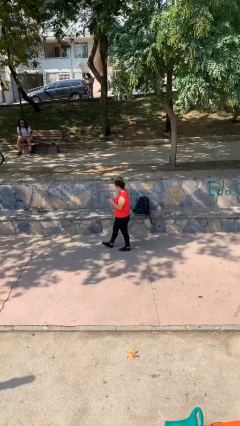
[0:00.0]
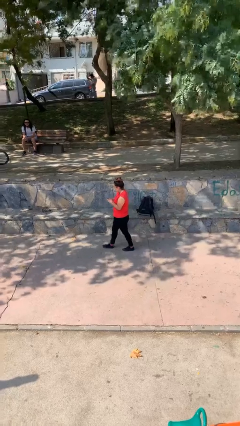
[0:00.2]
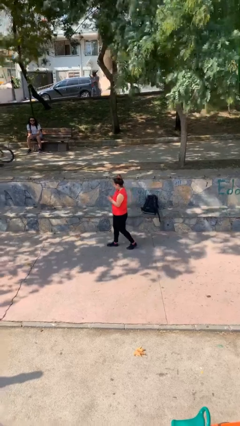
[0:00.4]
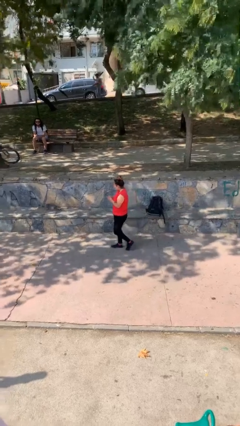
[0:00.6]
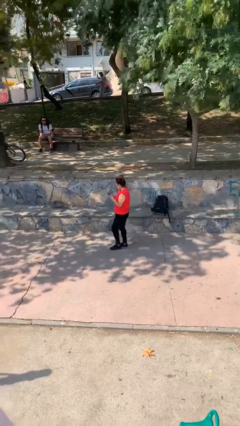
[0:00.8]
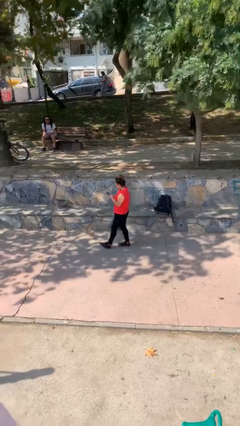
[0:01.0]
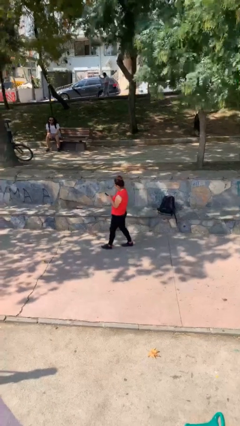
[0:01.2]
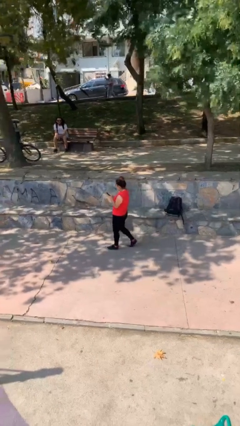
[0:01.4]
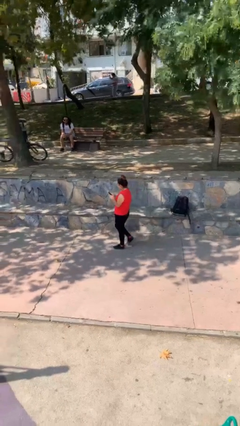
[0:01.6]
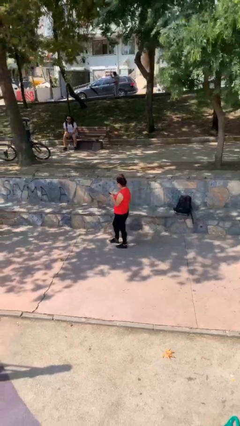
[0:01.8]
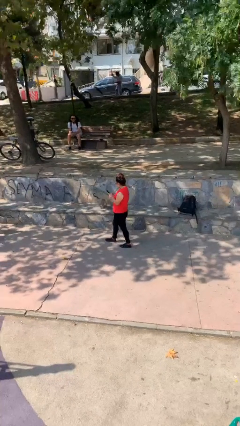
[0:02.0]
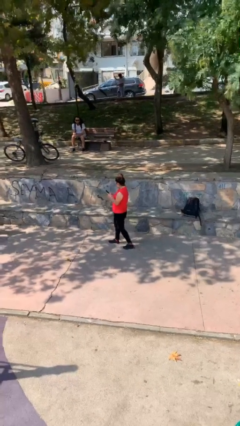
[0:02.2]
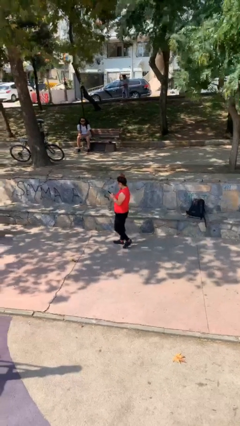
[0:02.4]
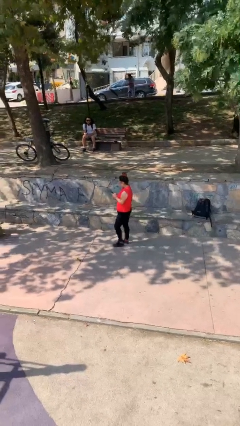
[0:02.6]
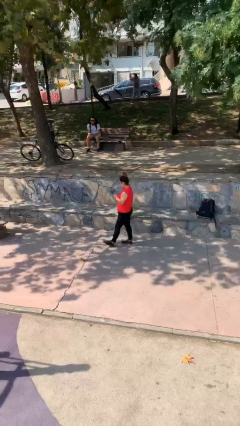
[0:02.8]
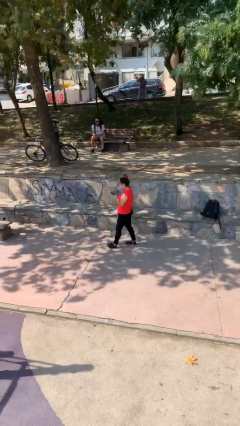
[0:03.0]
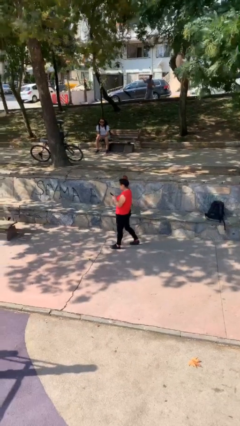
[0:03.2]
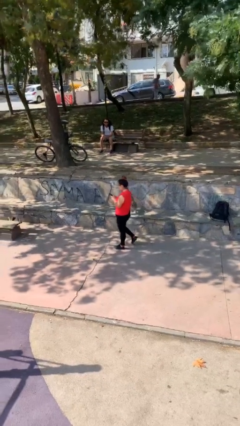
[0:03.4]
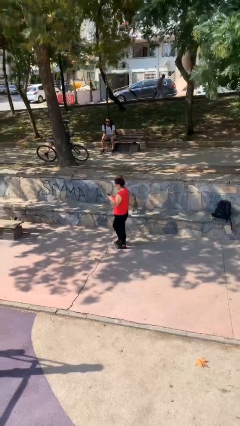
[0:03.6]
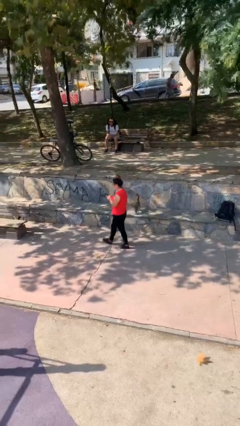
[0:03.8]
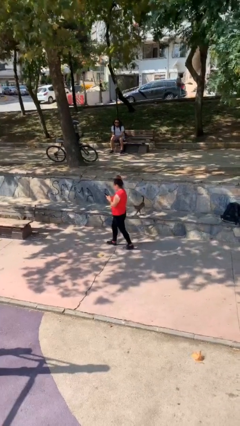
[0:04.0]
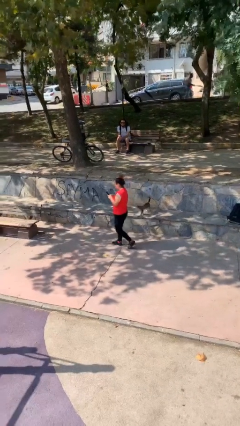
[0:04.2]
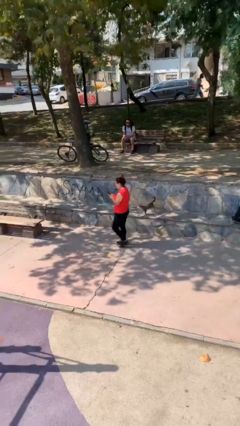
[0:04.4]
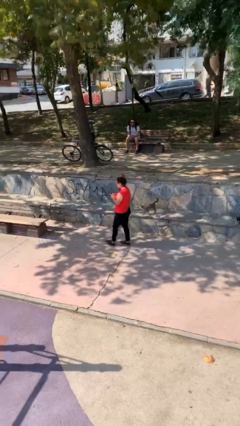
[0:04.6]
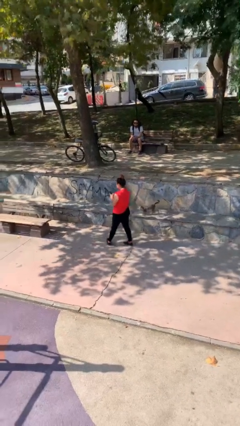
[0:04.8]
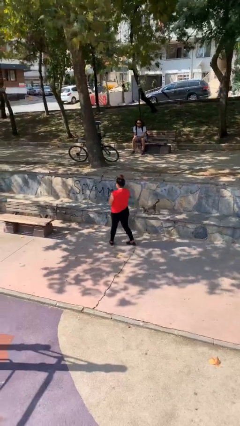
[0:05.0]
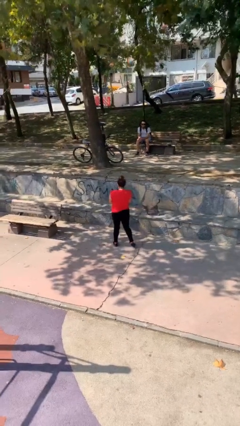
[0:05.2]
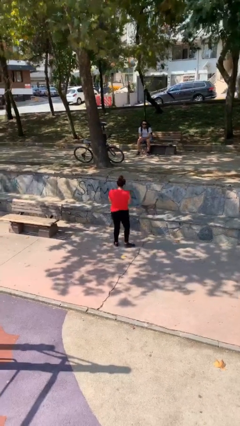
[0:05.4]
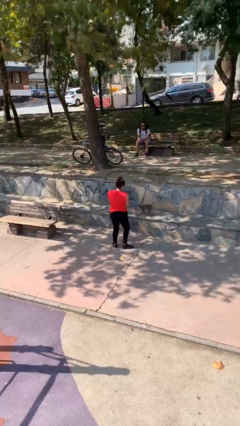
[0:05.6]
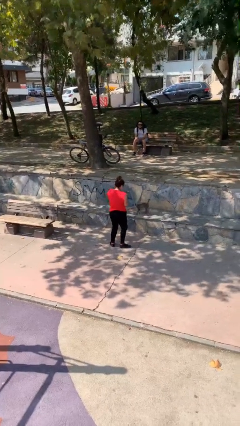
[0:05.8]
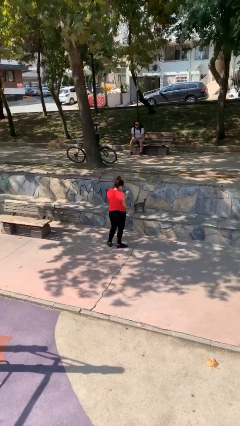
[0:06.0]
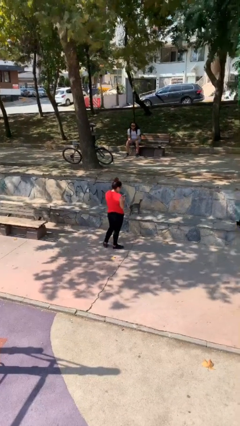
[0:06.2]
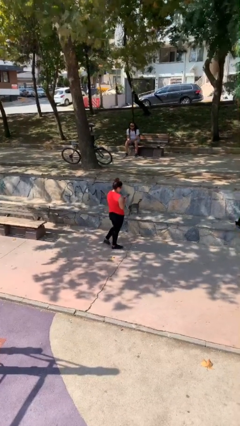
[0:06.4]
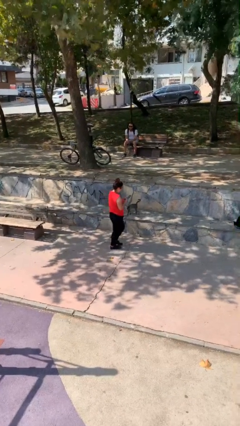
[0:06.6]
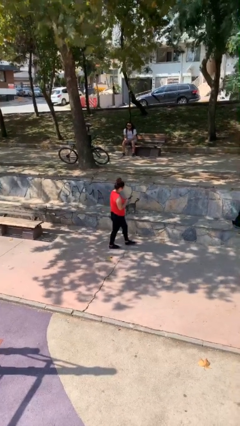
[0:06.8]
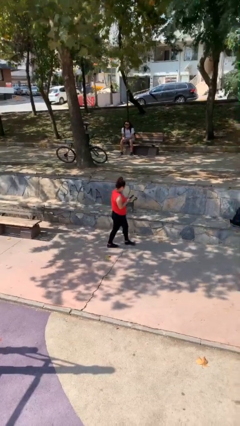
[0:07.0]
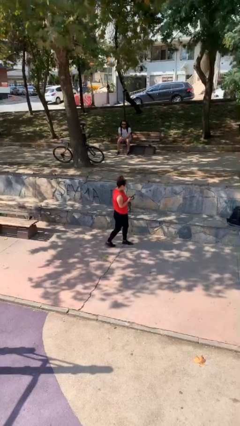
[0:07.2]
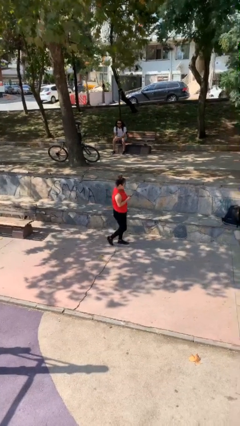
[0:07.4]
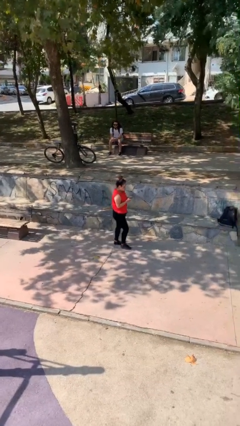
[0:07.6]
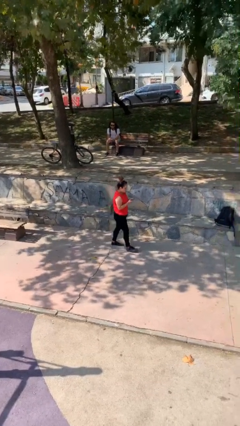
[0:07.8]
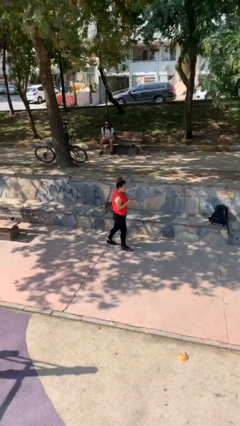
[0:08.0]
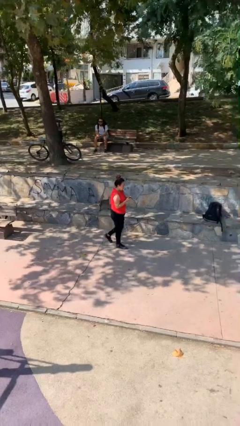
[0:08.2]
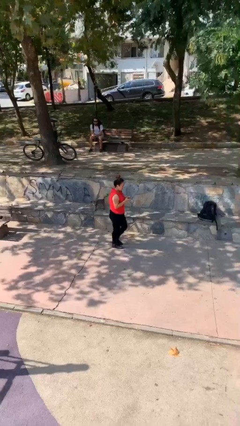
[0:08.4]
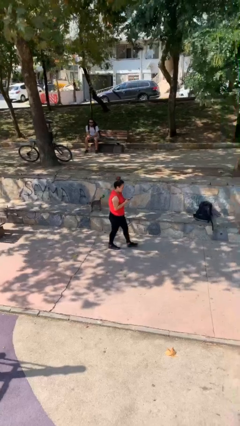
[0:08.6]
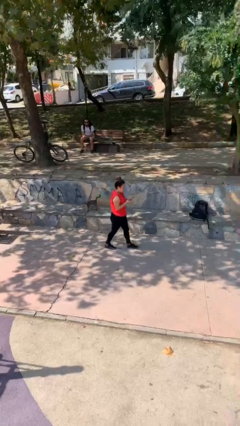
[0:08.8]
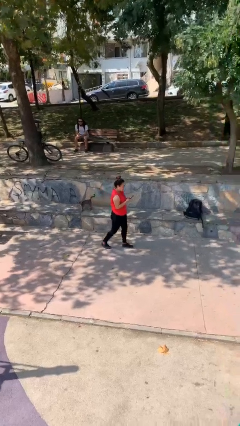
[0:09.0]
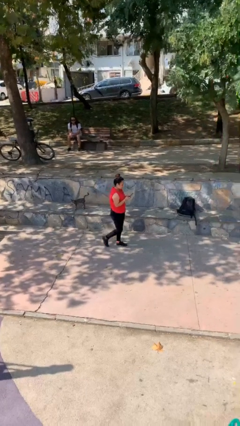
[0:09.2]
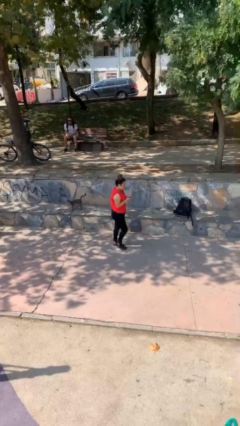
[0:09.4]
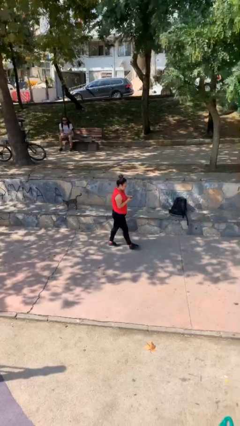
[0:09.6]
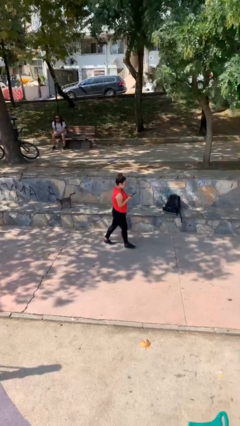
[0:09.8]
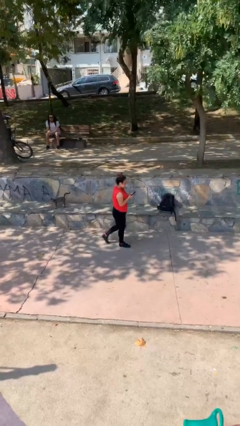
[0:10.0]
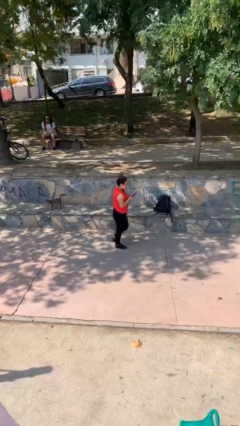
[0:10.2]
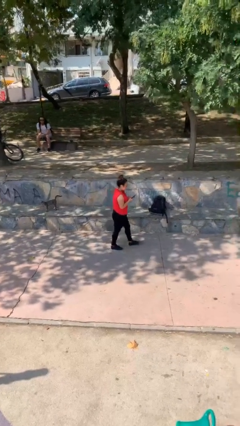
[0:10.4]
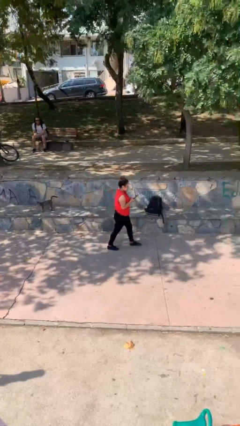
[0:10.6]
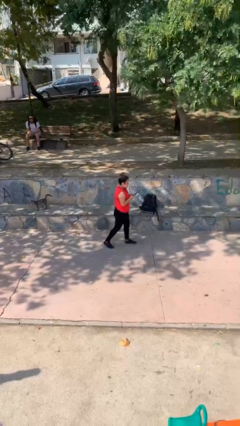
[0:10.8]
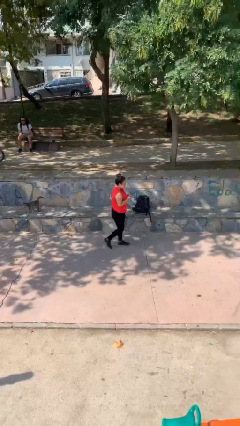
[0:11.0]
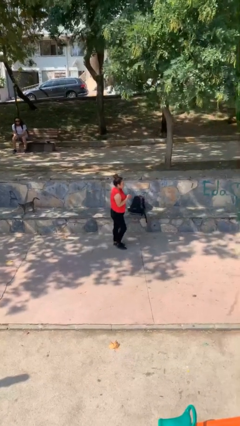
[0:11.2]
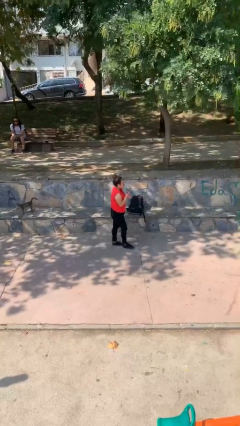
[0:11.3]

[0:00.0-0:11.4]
person texts on phone

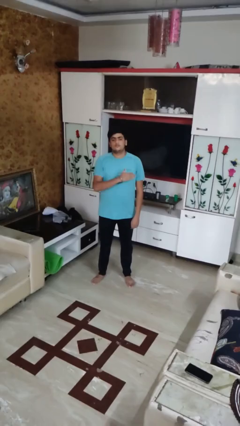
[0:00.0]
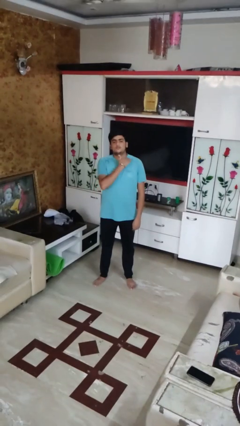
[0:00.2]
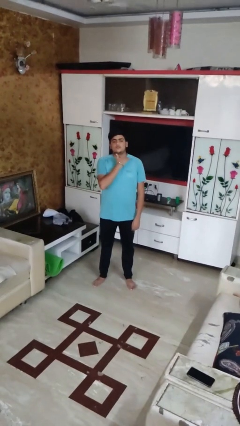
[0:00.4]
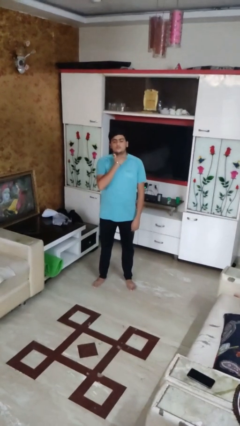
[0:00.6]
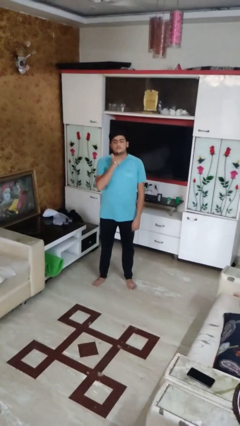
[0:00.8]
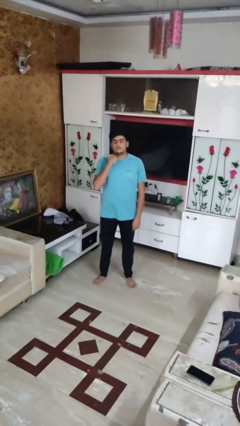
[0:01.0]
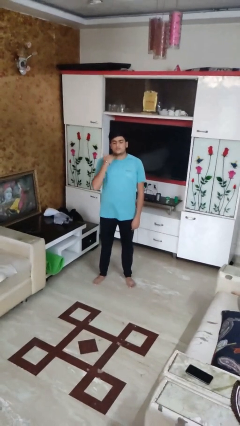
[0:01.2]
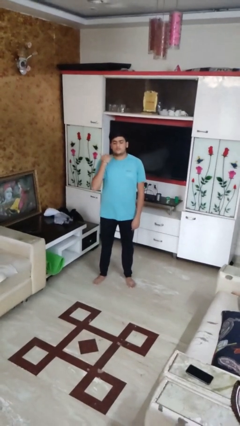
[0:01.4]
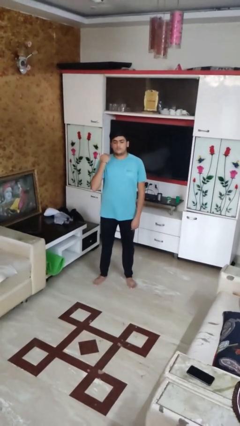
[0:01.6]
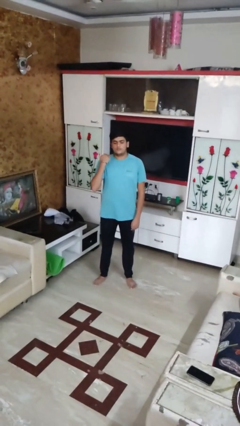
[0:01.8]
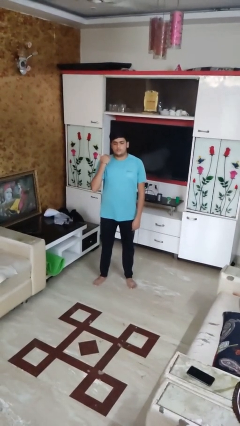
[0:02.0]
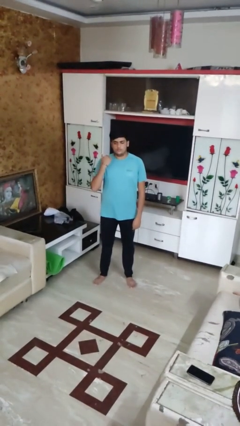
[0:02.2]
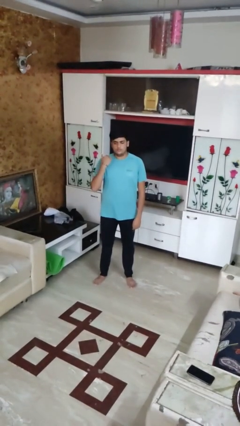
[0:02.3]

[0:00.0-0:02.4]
person gestures cut

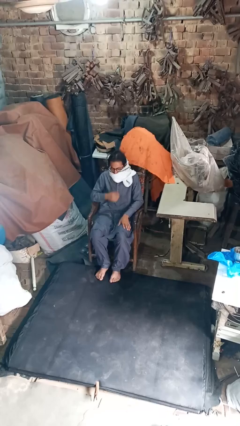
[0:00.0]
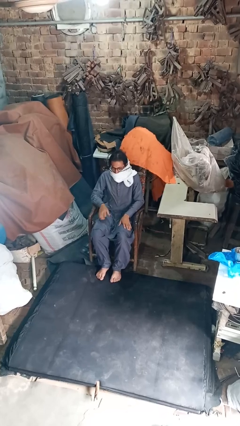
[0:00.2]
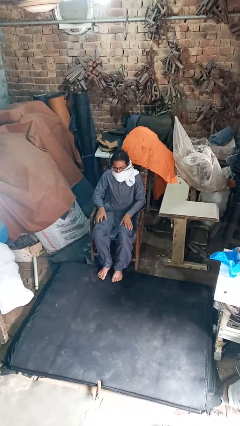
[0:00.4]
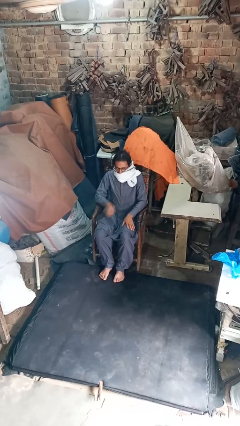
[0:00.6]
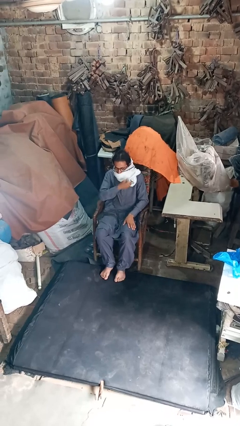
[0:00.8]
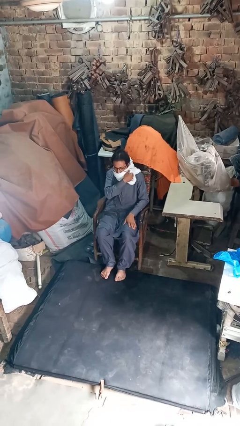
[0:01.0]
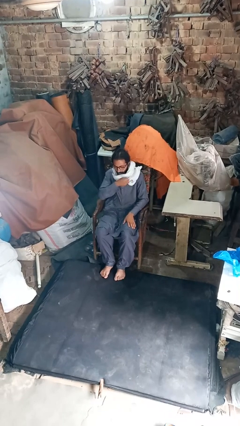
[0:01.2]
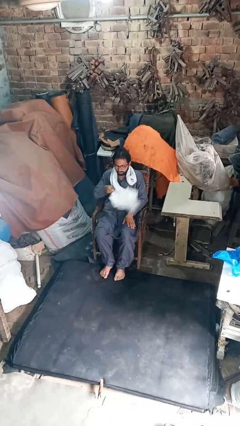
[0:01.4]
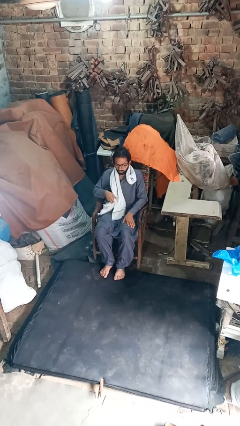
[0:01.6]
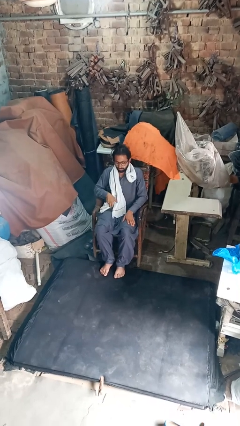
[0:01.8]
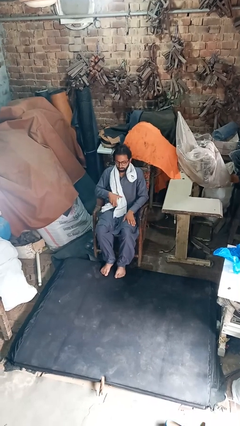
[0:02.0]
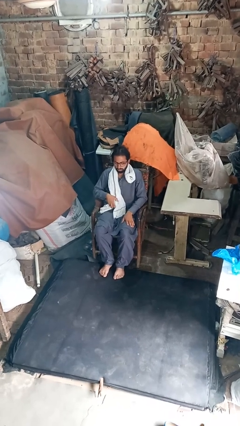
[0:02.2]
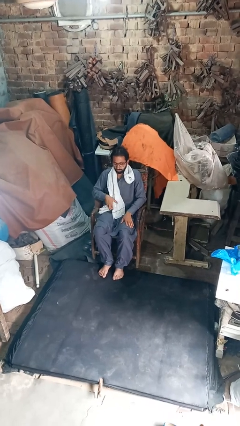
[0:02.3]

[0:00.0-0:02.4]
person takes off scarf

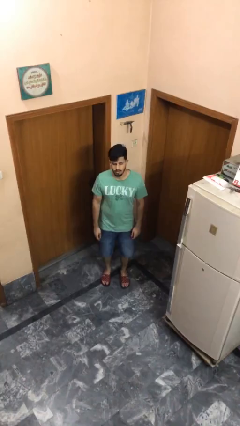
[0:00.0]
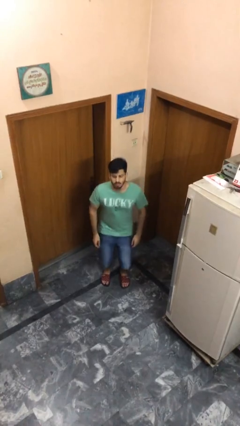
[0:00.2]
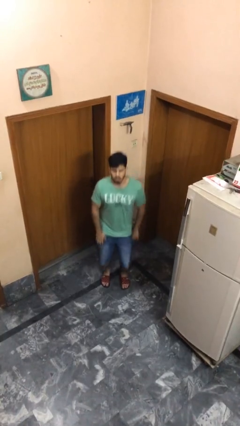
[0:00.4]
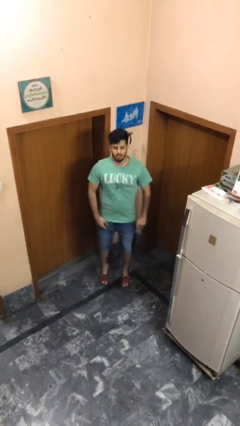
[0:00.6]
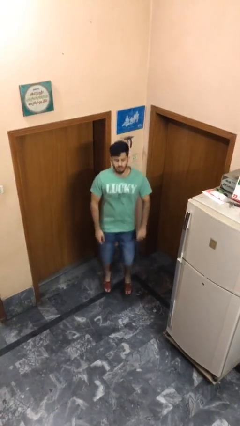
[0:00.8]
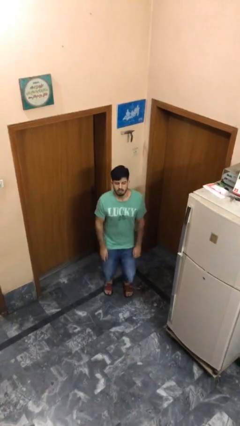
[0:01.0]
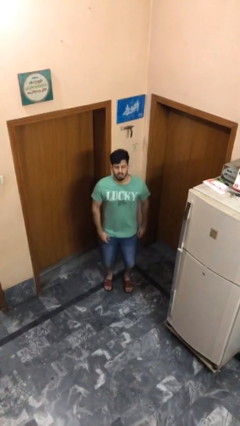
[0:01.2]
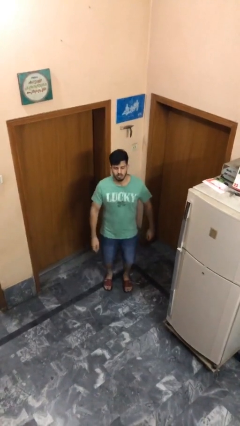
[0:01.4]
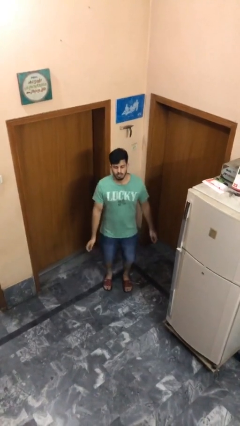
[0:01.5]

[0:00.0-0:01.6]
person jumps
